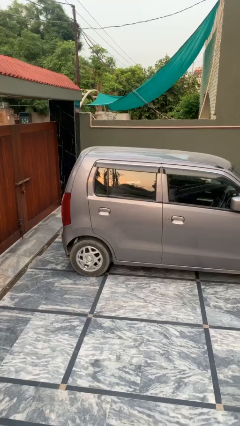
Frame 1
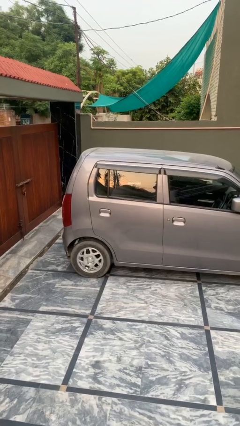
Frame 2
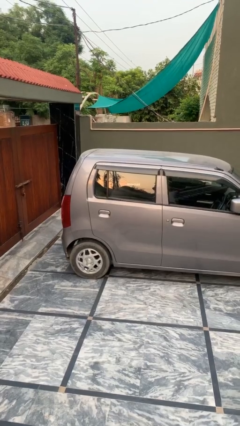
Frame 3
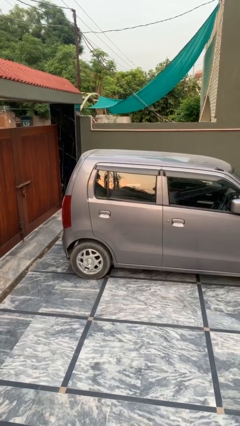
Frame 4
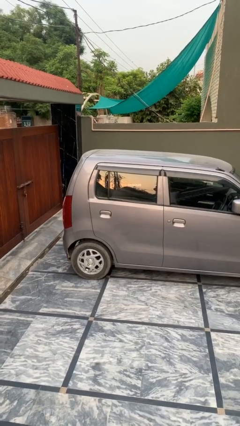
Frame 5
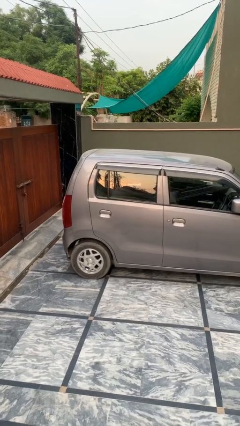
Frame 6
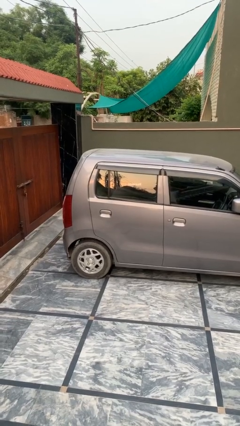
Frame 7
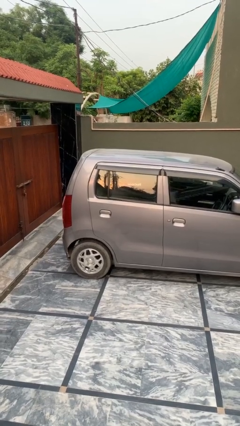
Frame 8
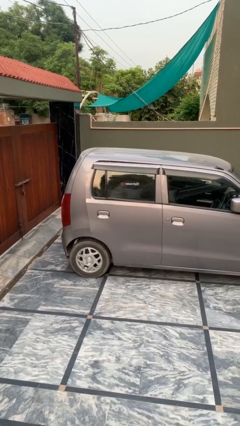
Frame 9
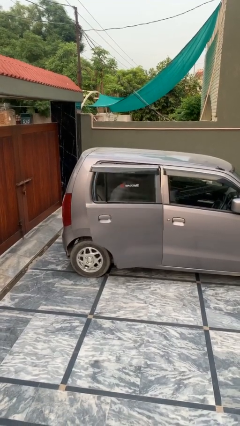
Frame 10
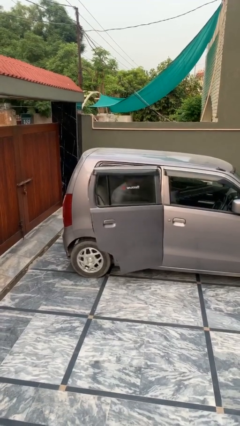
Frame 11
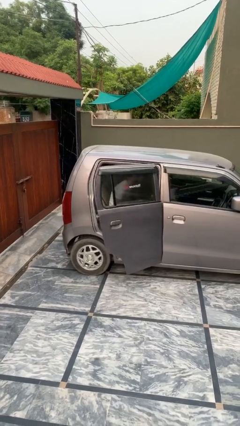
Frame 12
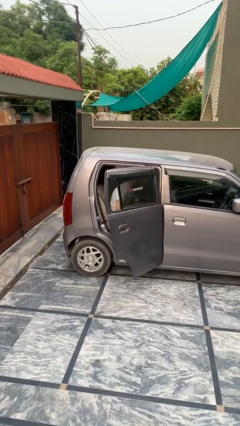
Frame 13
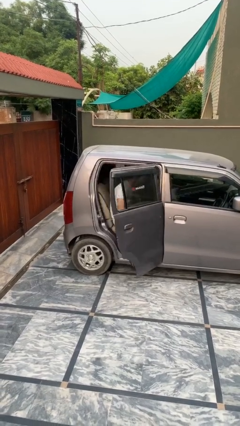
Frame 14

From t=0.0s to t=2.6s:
person opens car door

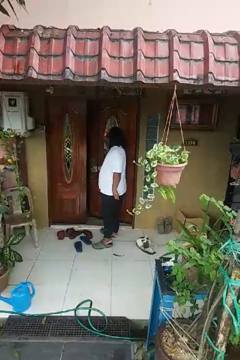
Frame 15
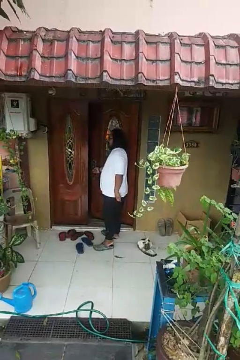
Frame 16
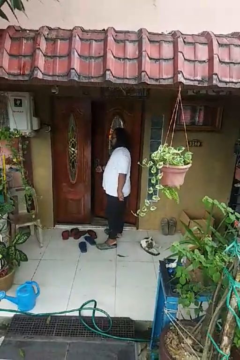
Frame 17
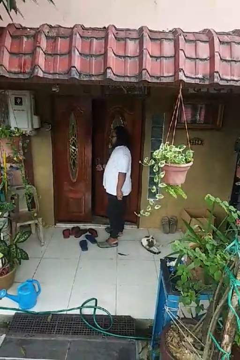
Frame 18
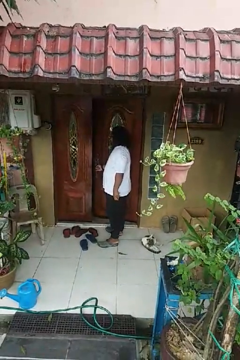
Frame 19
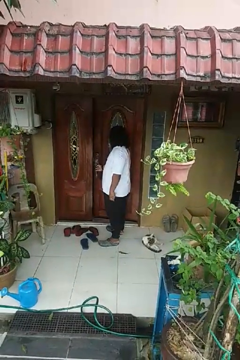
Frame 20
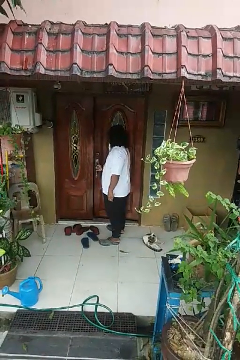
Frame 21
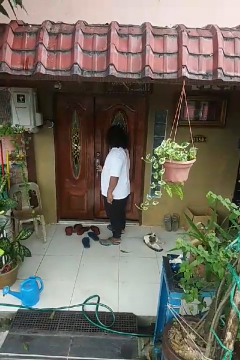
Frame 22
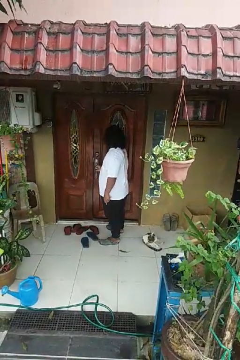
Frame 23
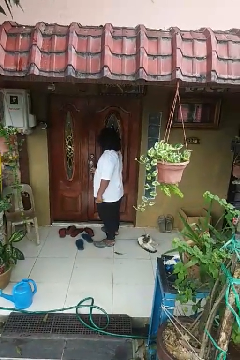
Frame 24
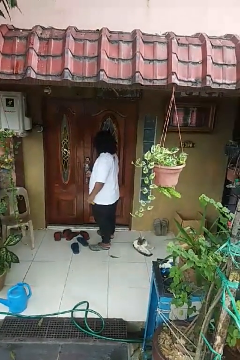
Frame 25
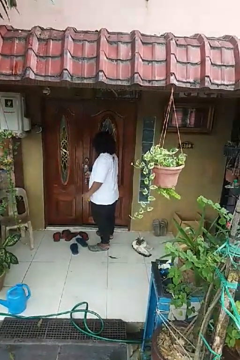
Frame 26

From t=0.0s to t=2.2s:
person closes facility door

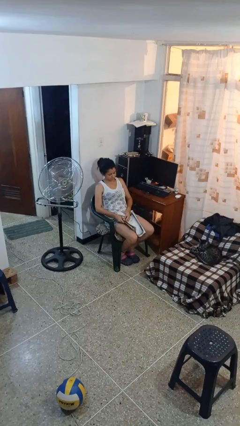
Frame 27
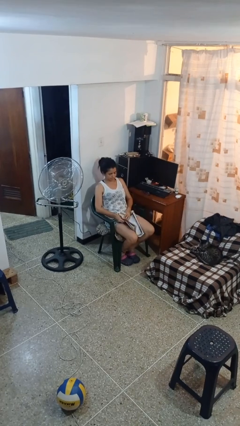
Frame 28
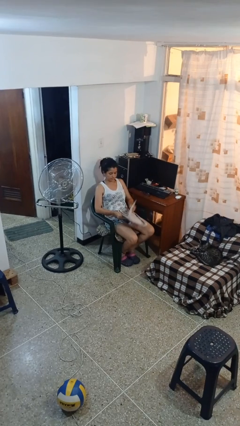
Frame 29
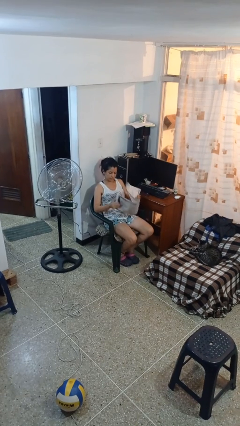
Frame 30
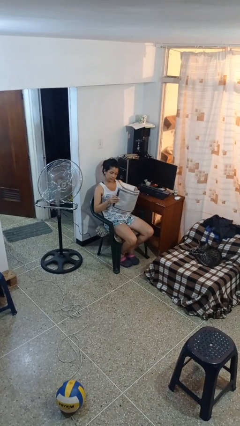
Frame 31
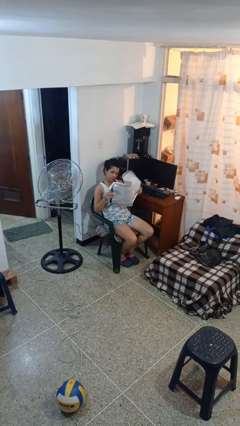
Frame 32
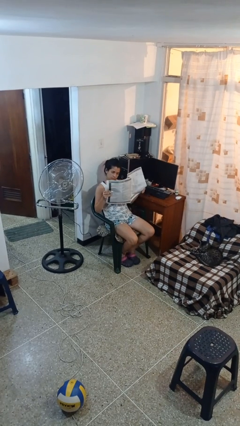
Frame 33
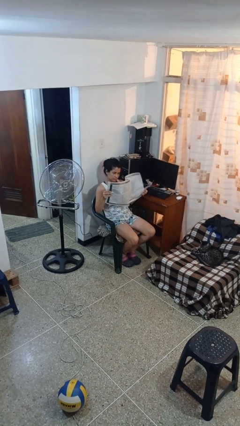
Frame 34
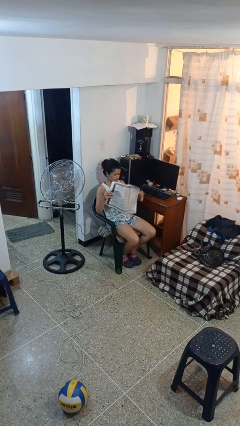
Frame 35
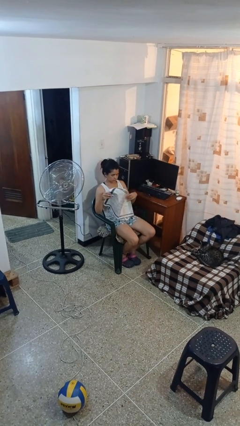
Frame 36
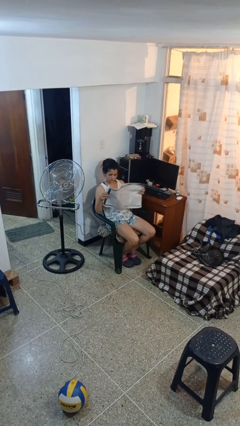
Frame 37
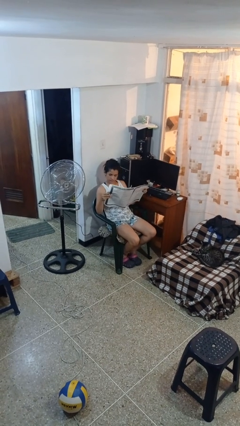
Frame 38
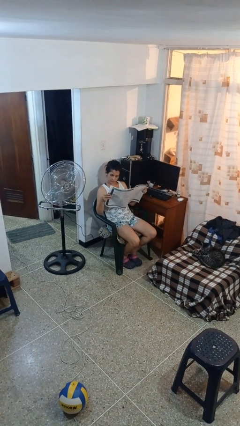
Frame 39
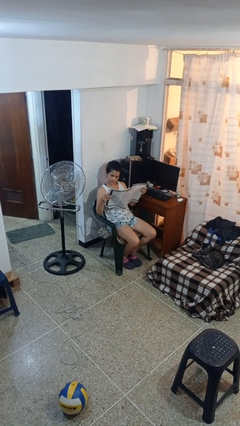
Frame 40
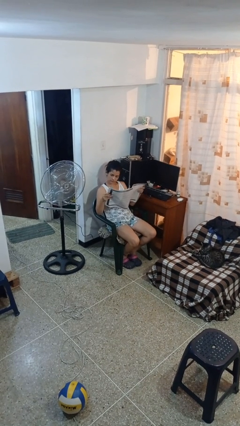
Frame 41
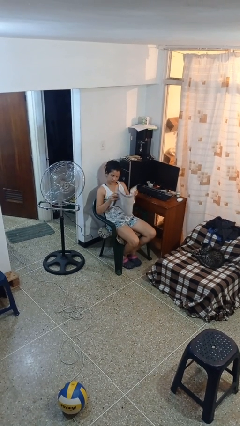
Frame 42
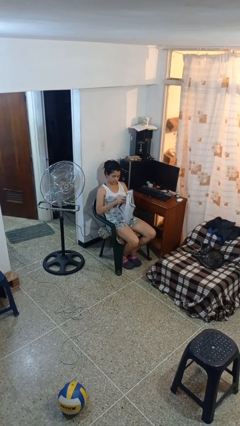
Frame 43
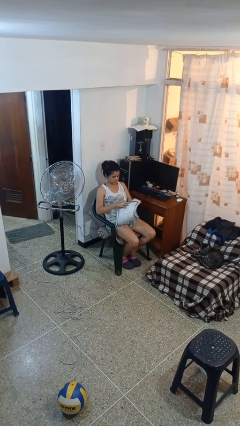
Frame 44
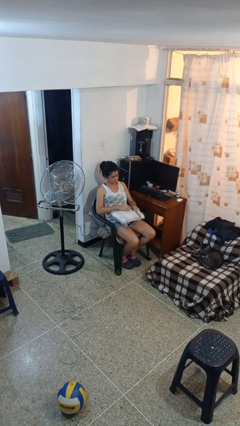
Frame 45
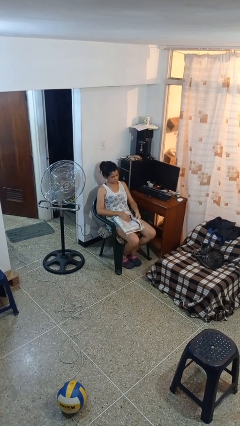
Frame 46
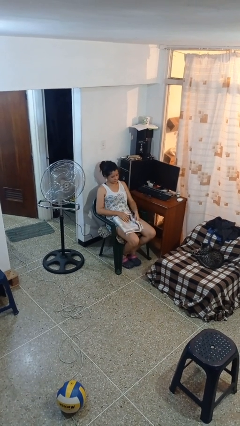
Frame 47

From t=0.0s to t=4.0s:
person reads newspaper

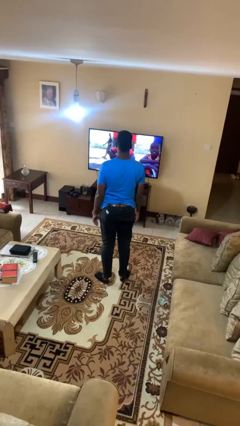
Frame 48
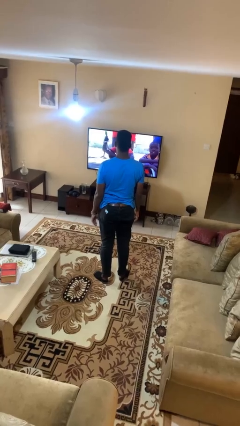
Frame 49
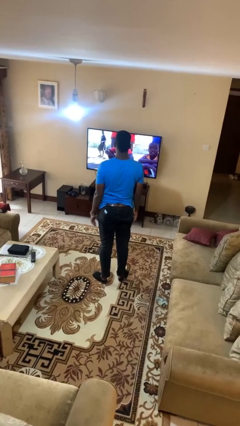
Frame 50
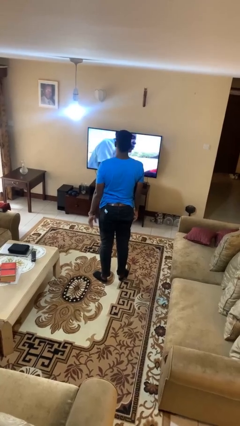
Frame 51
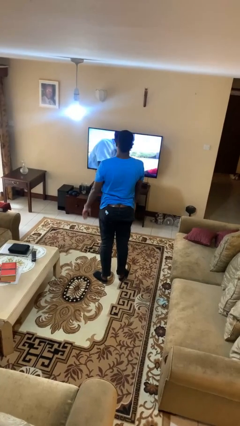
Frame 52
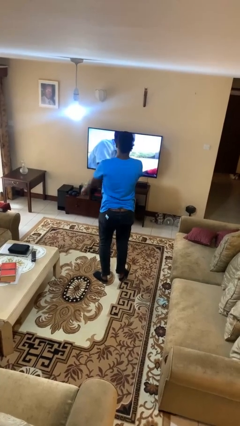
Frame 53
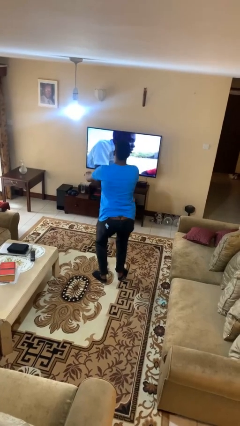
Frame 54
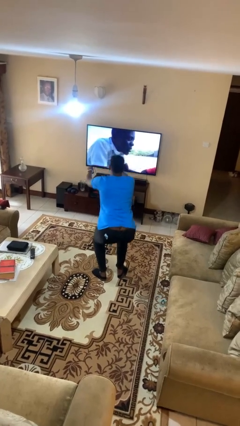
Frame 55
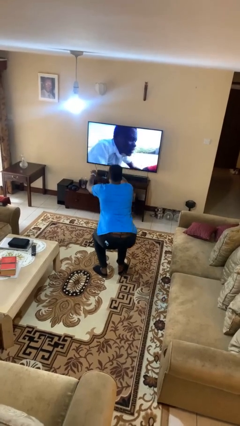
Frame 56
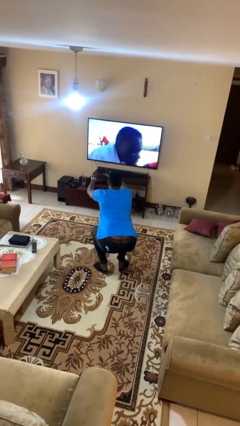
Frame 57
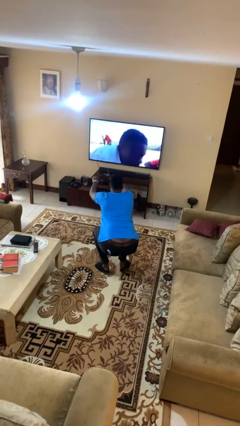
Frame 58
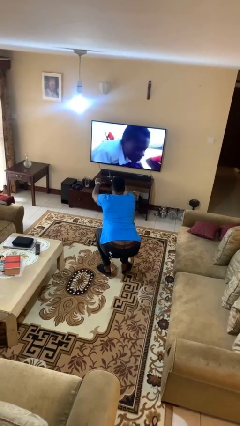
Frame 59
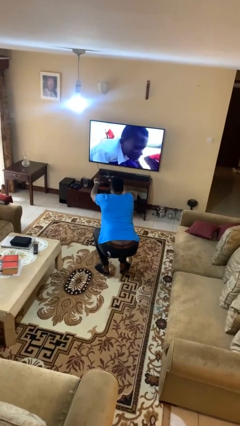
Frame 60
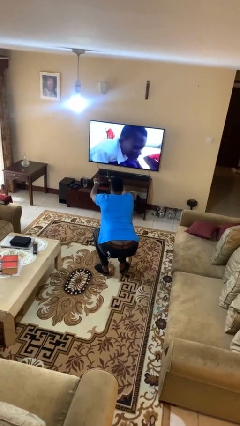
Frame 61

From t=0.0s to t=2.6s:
person squats

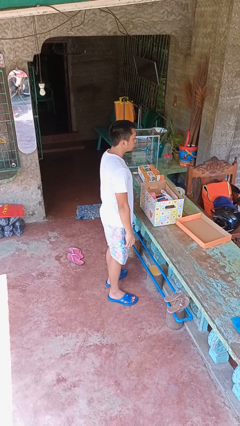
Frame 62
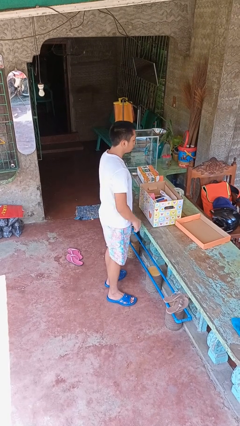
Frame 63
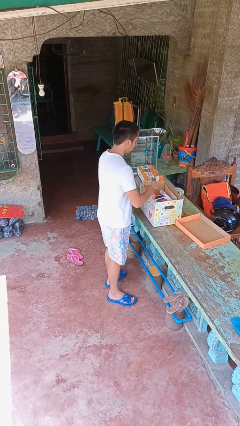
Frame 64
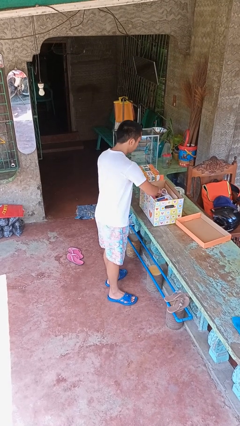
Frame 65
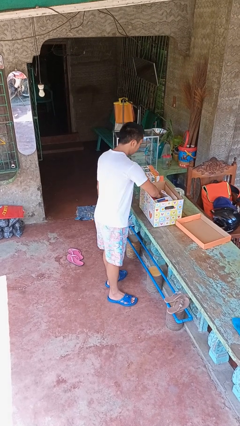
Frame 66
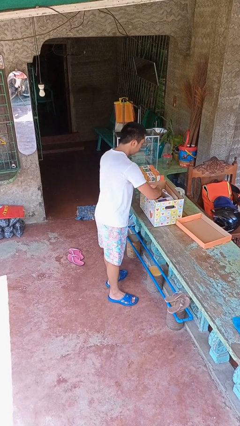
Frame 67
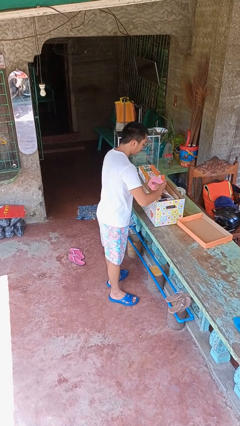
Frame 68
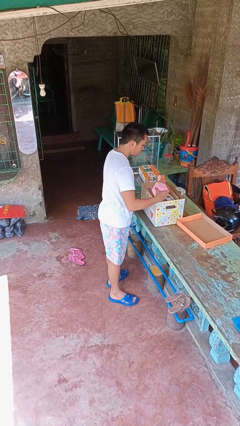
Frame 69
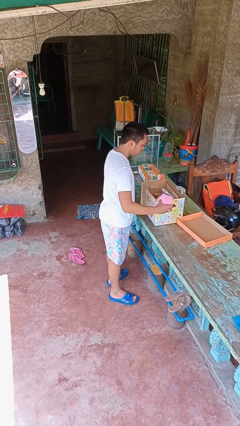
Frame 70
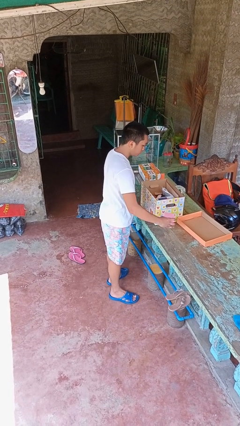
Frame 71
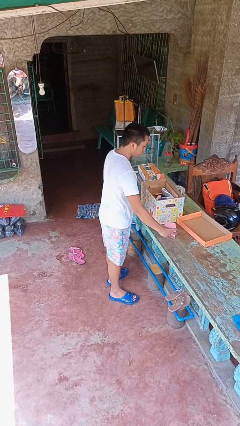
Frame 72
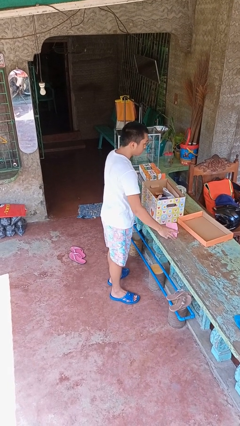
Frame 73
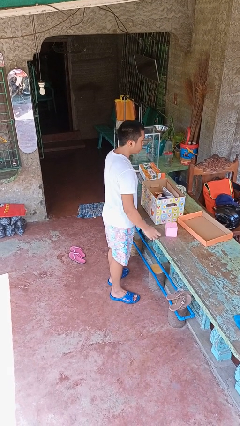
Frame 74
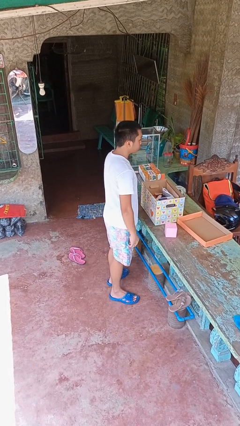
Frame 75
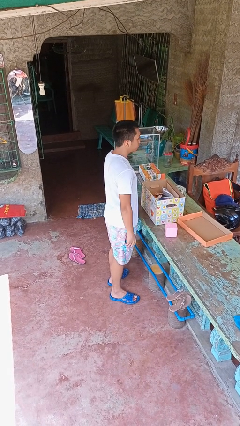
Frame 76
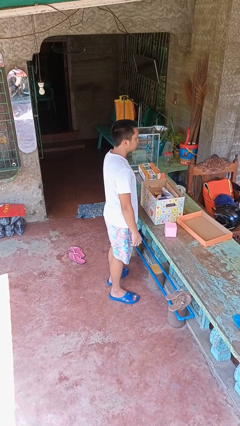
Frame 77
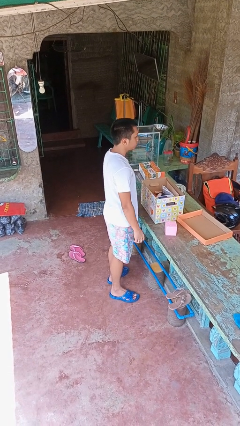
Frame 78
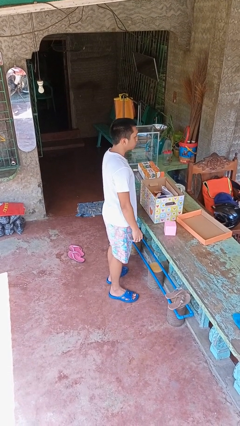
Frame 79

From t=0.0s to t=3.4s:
person takes object from box

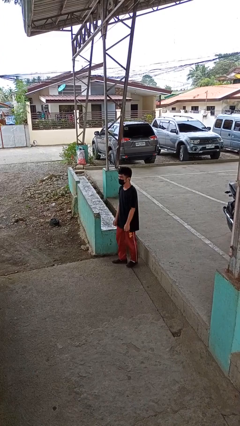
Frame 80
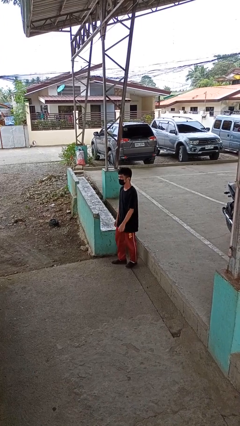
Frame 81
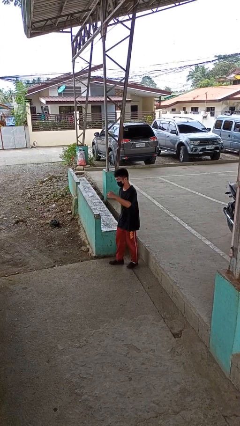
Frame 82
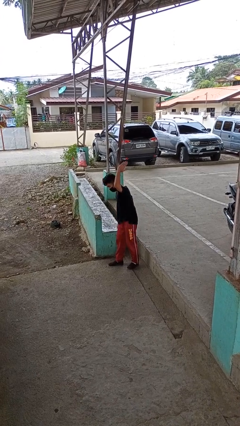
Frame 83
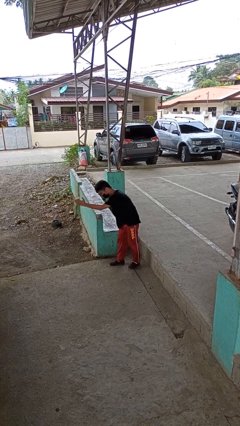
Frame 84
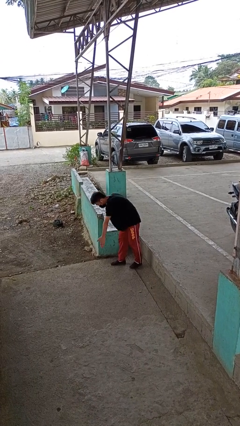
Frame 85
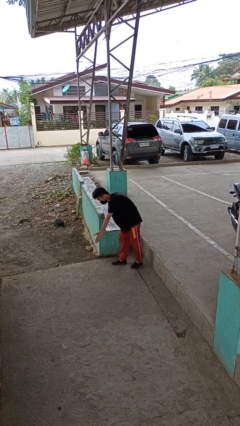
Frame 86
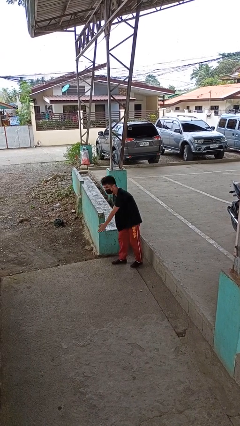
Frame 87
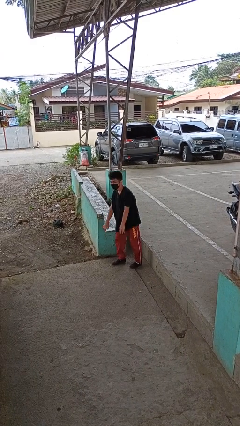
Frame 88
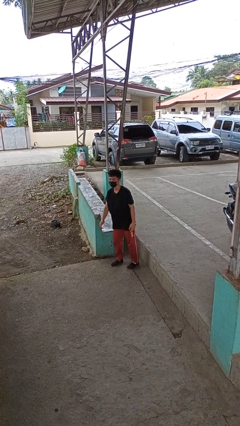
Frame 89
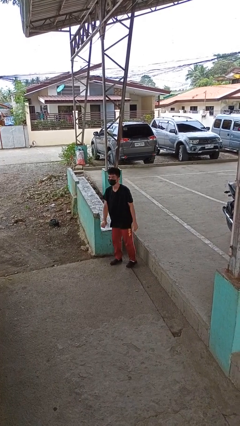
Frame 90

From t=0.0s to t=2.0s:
person karate chop

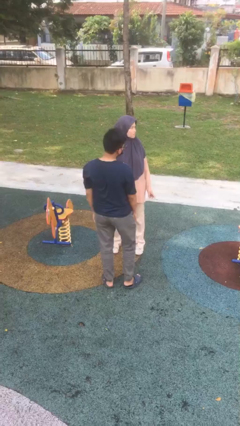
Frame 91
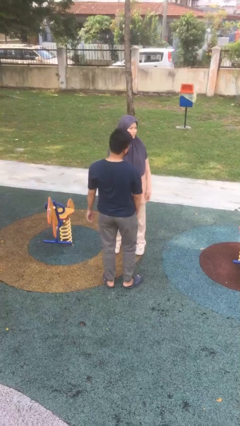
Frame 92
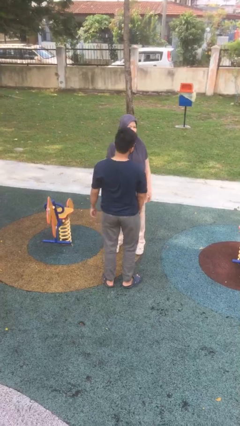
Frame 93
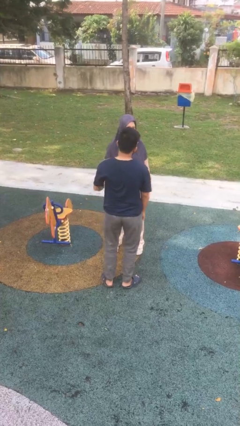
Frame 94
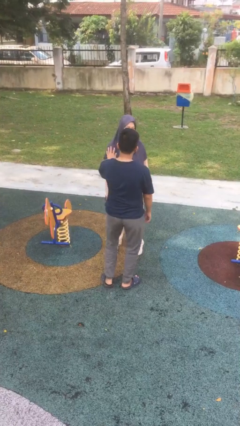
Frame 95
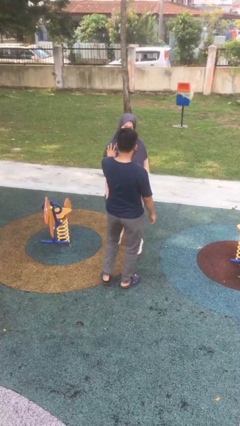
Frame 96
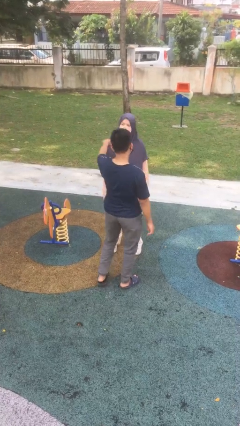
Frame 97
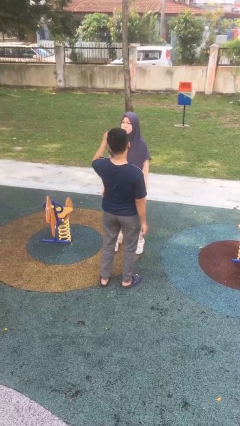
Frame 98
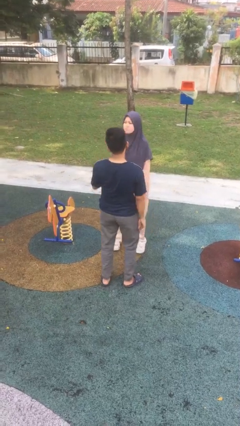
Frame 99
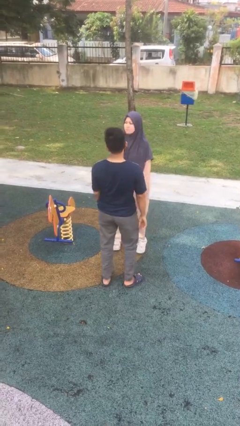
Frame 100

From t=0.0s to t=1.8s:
person shoves person
